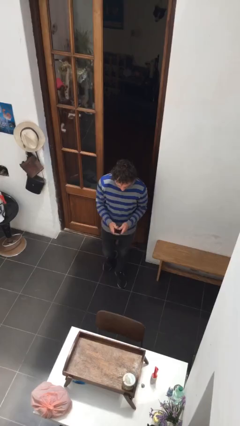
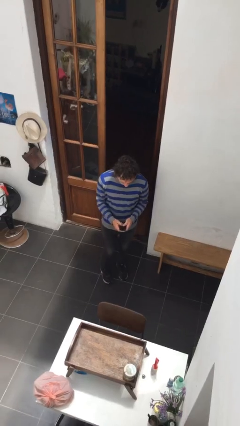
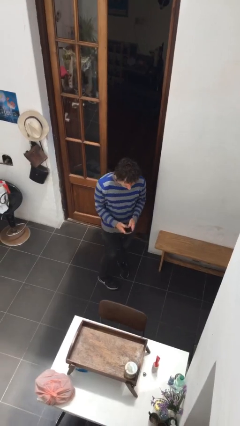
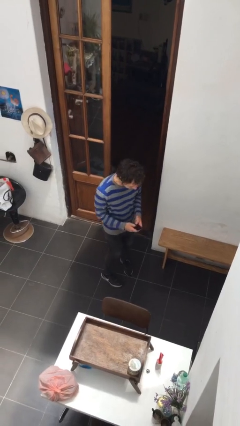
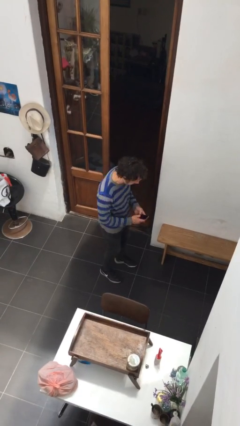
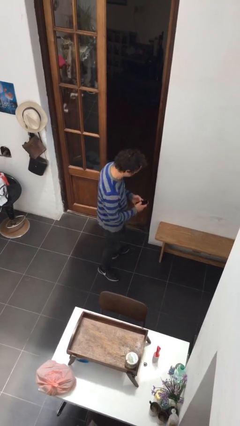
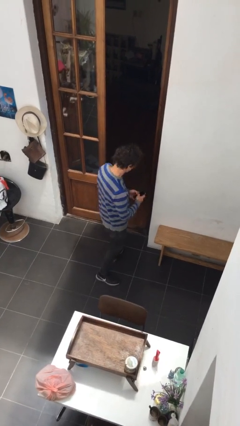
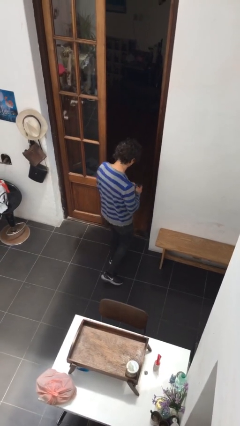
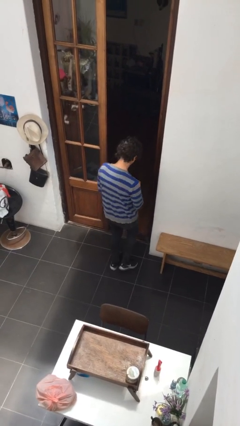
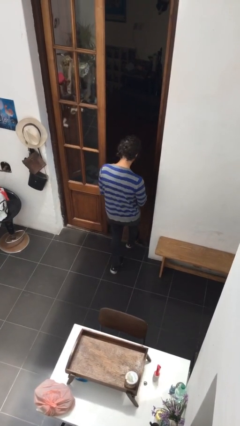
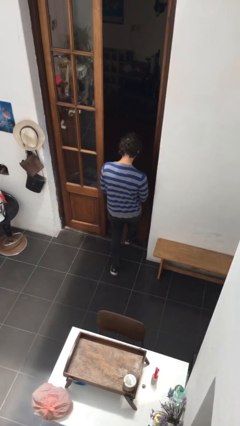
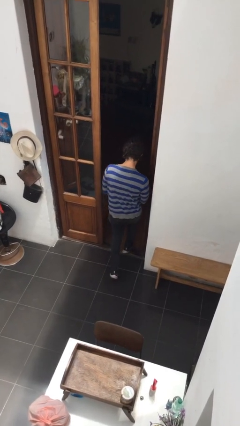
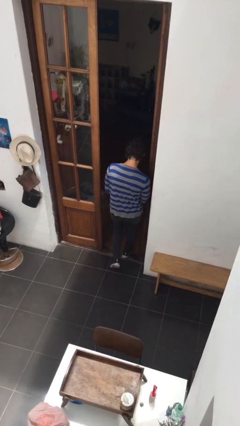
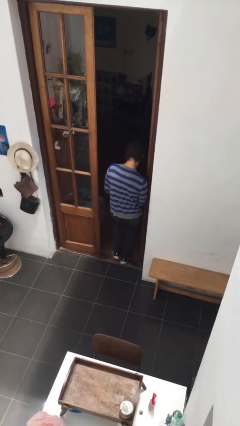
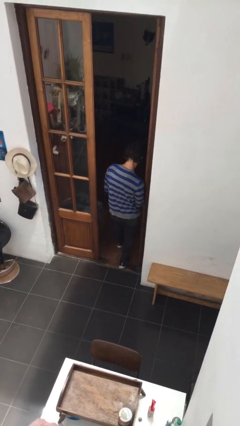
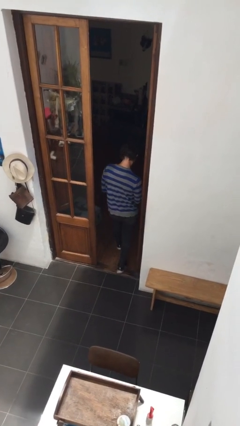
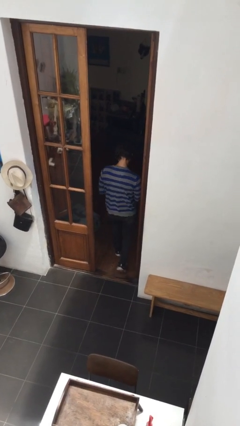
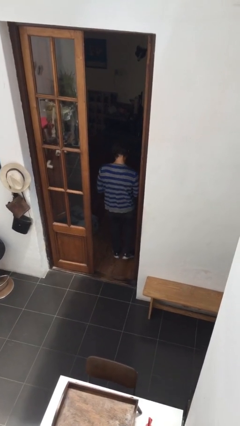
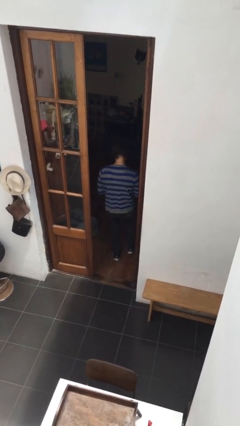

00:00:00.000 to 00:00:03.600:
person exits scene through structure

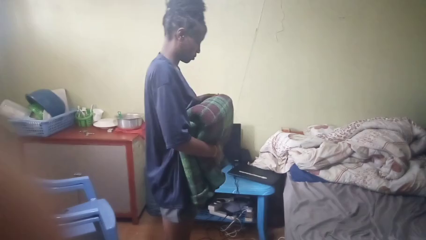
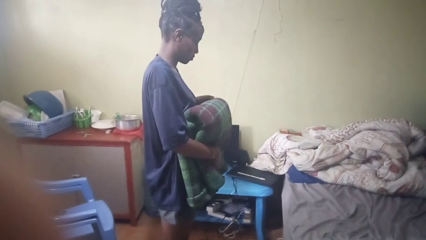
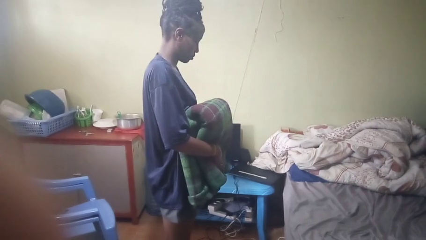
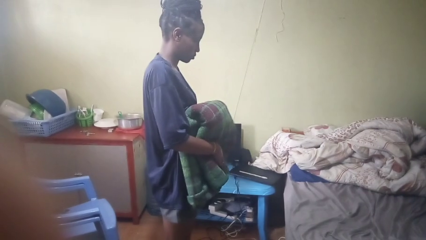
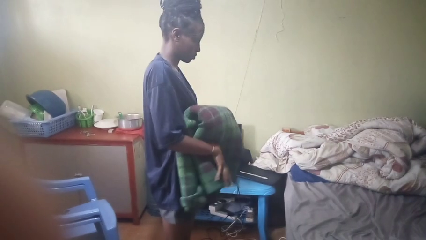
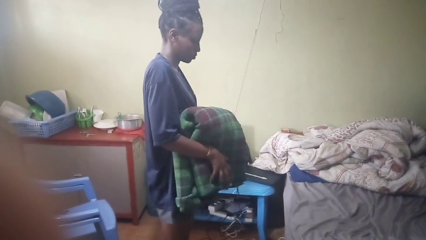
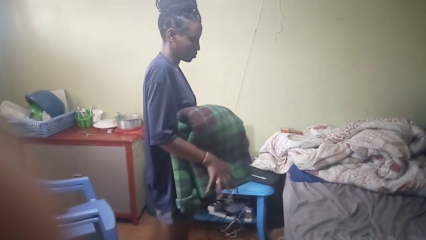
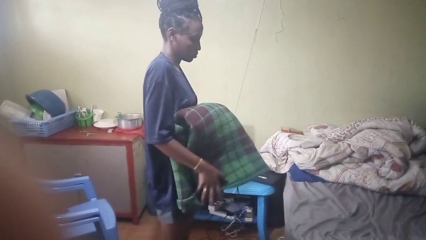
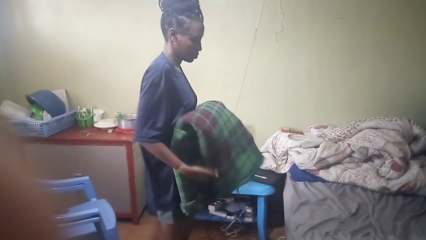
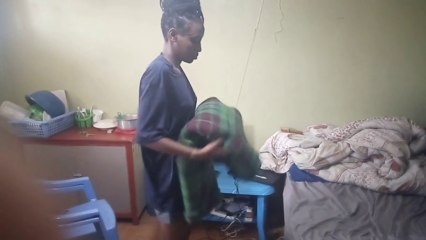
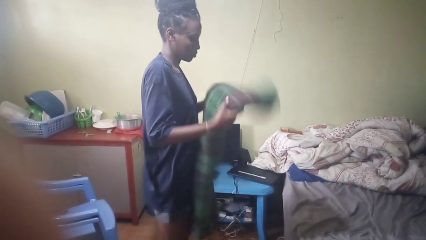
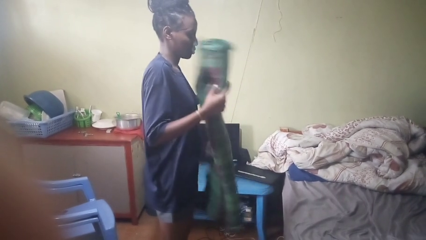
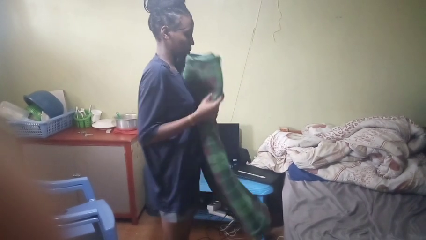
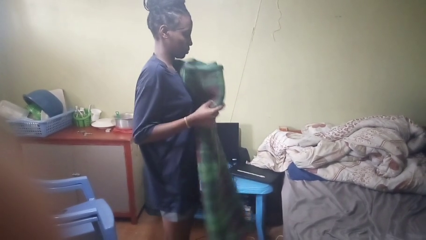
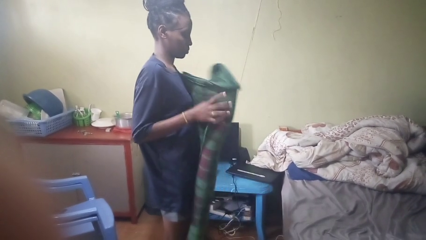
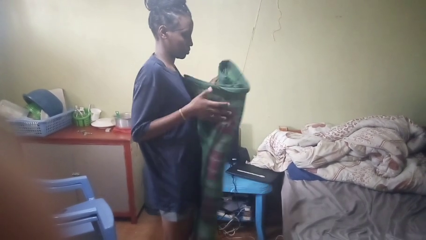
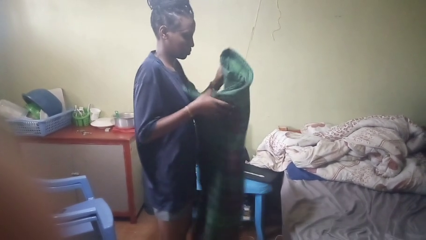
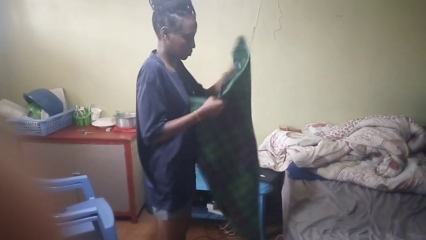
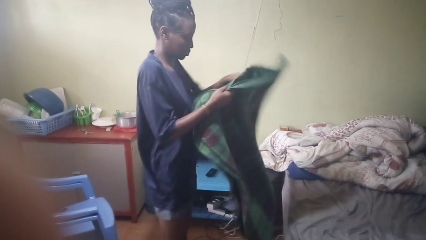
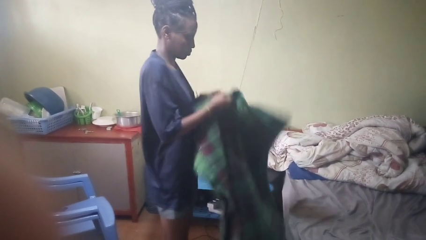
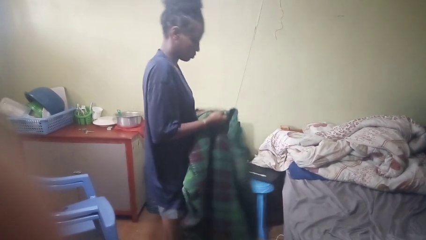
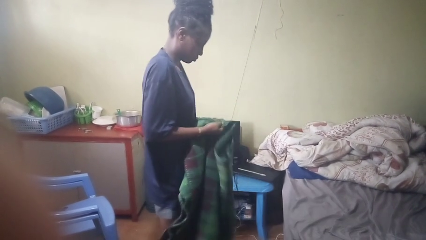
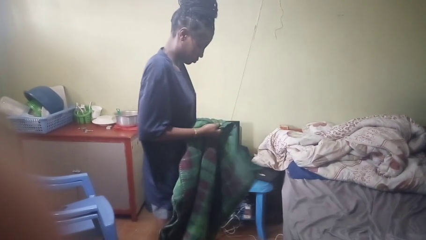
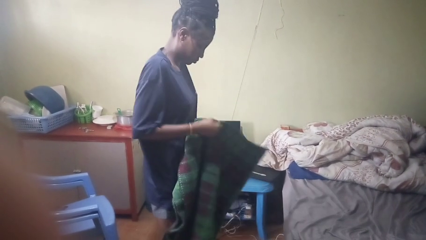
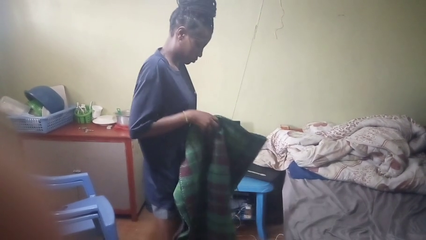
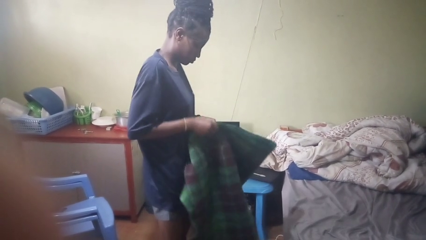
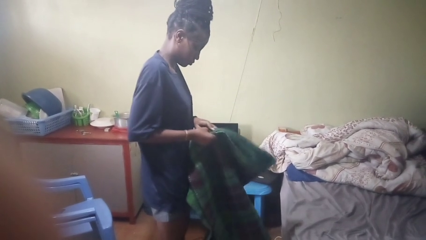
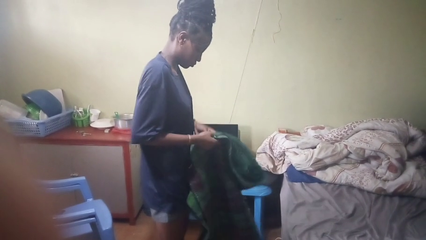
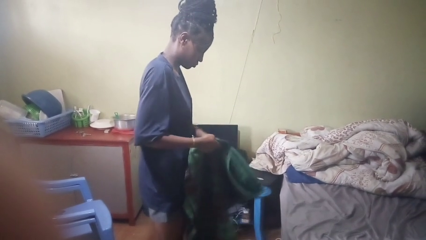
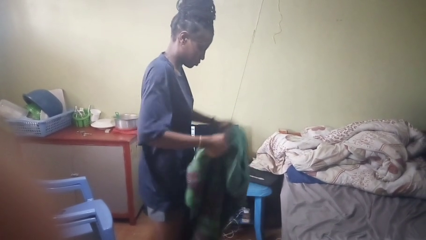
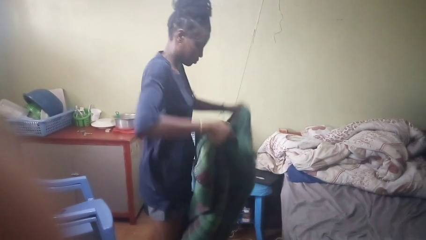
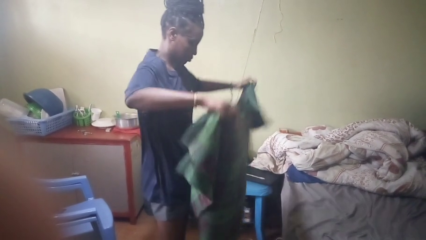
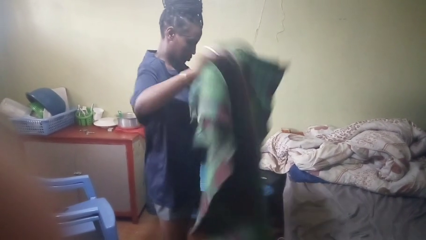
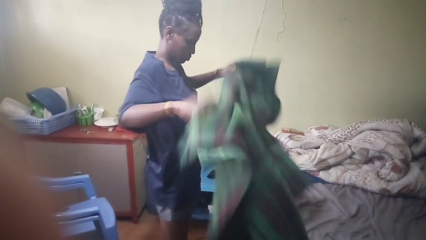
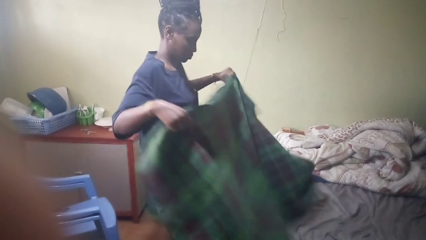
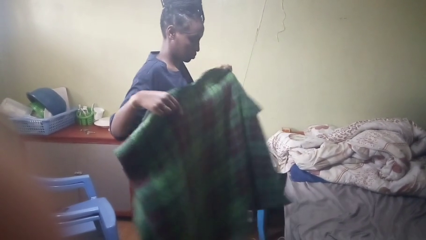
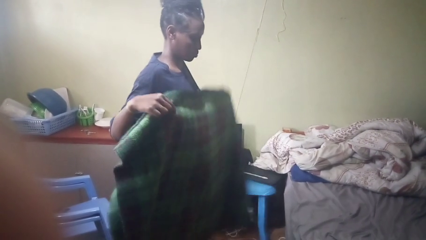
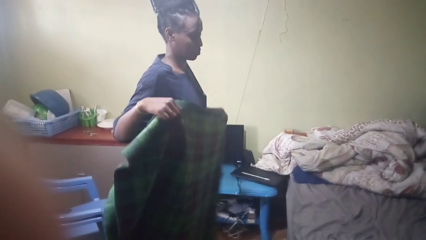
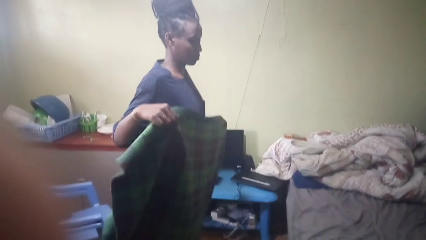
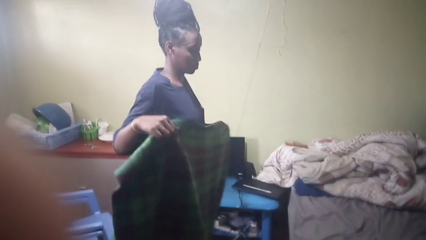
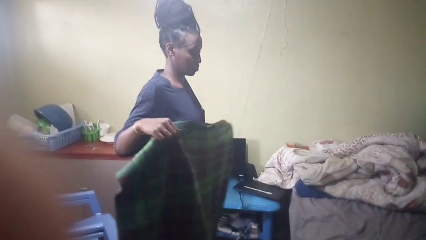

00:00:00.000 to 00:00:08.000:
person unfolds blanket

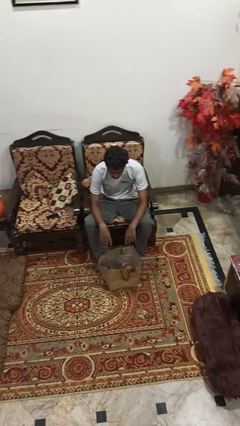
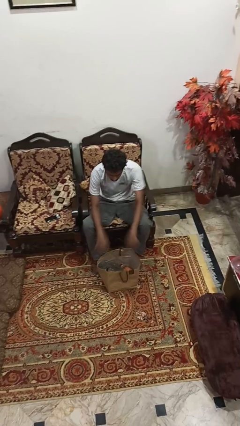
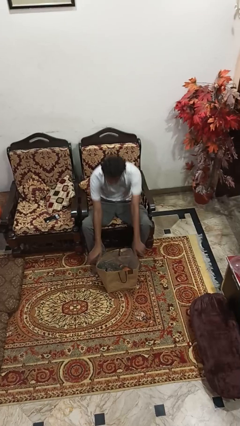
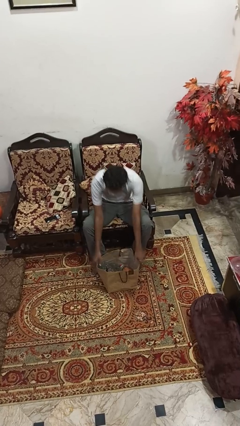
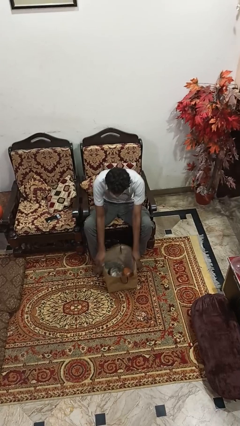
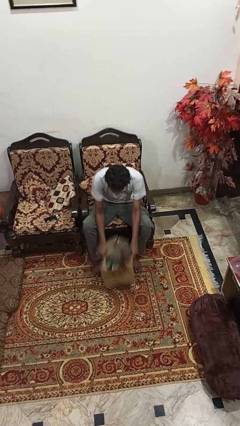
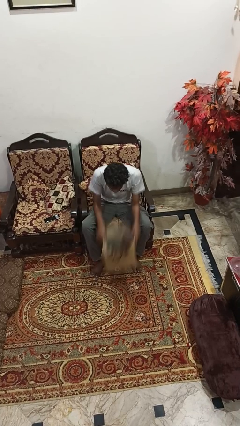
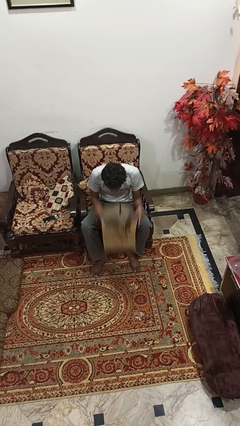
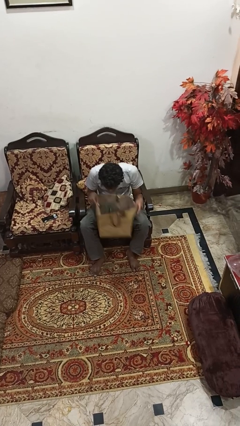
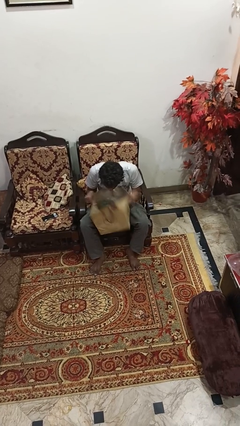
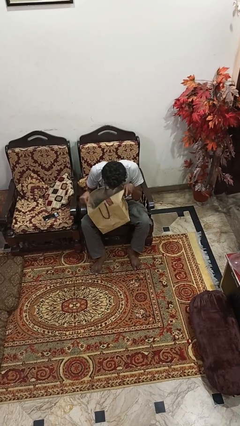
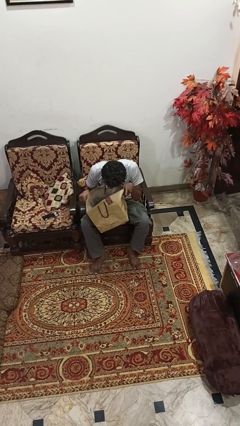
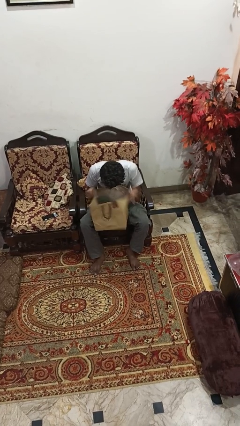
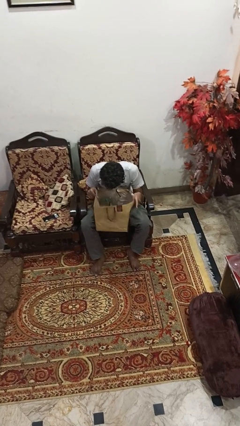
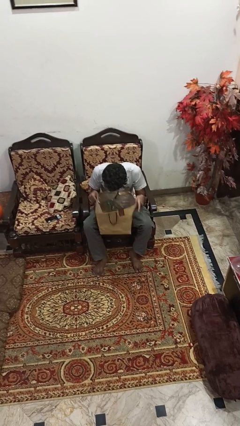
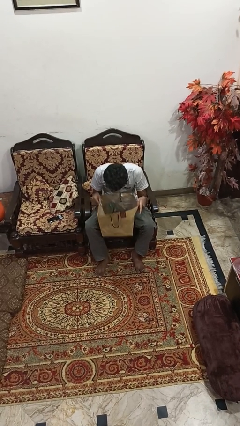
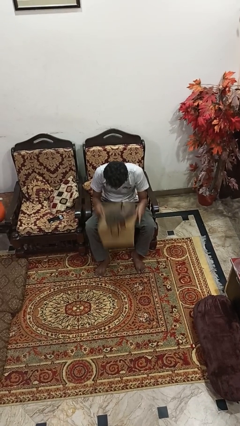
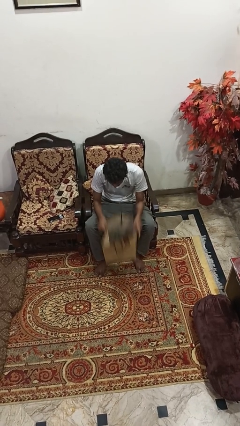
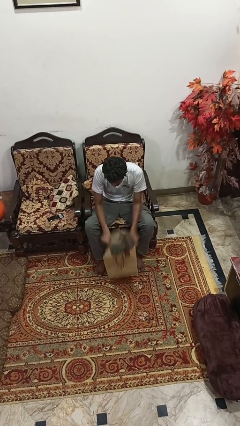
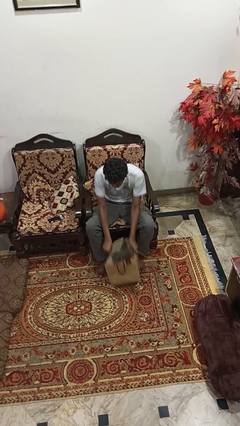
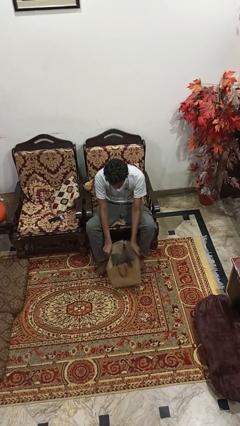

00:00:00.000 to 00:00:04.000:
person searches in bag

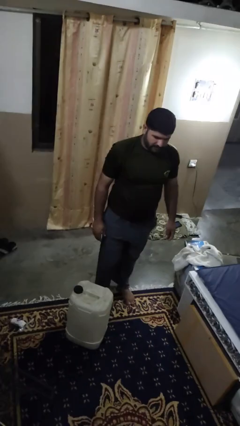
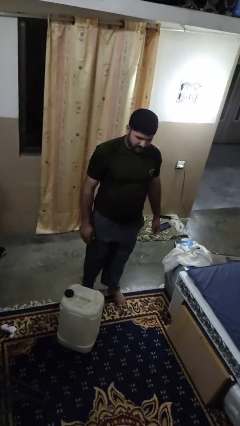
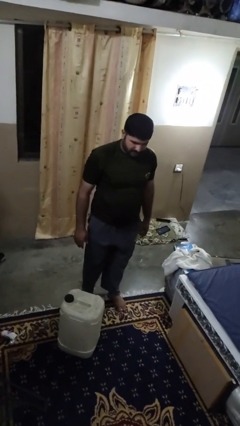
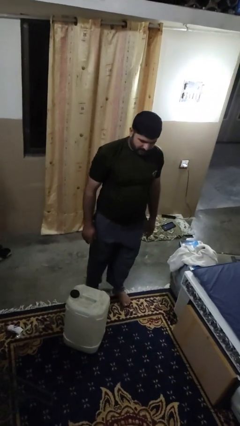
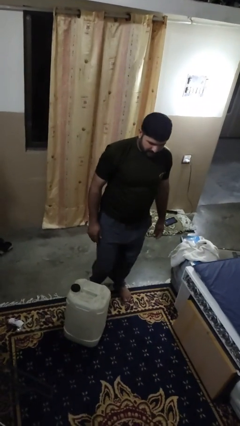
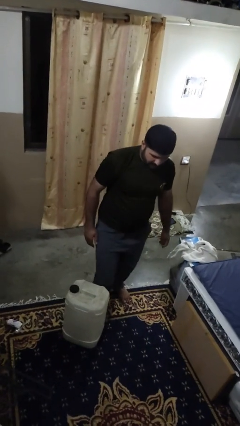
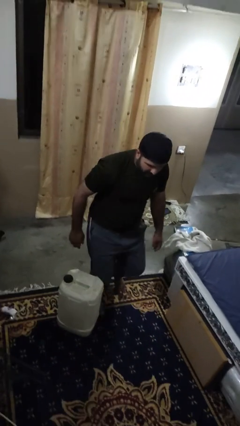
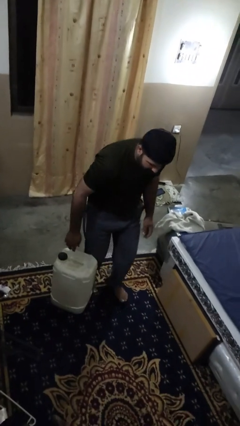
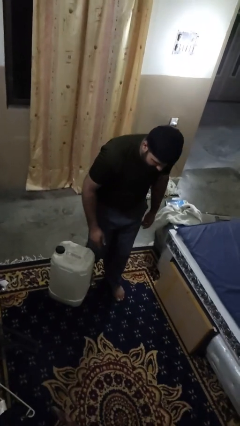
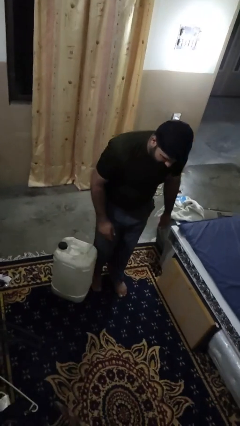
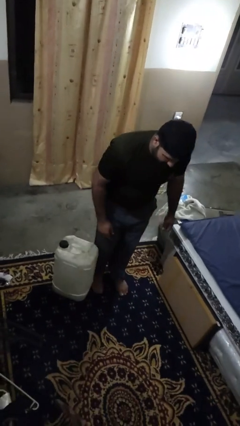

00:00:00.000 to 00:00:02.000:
person trips on object on floor
